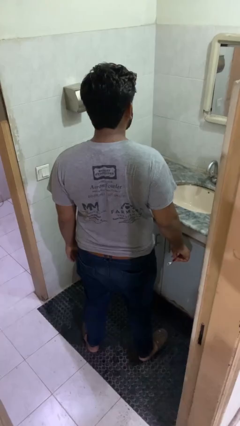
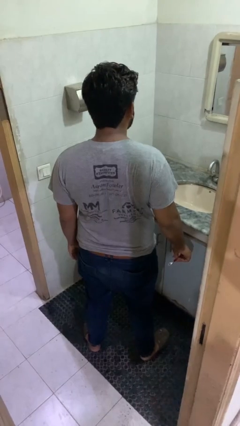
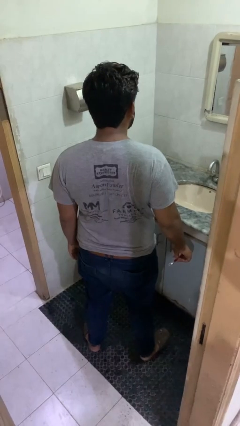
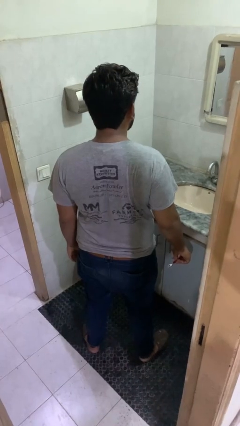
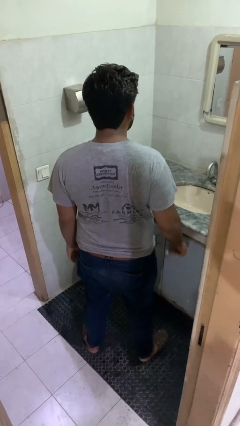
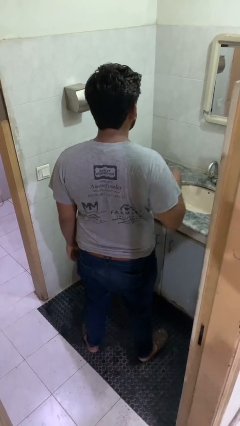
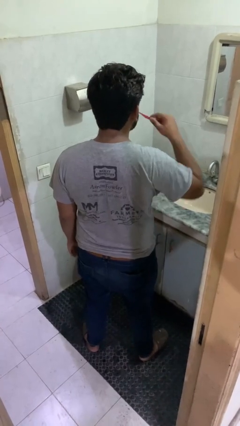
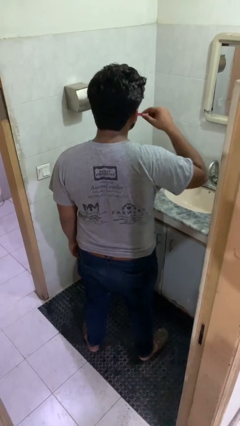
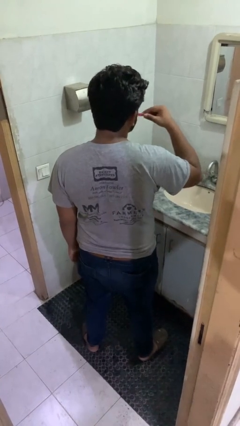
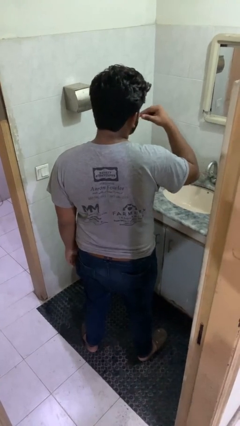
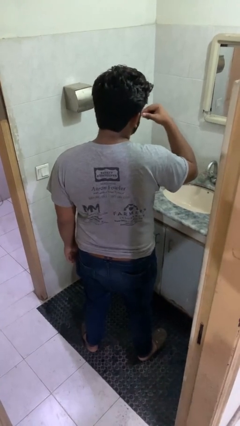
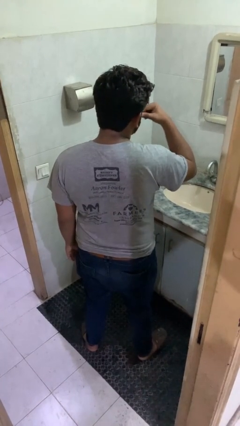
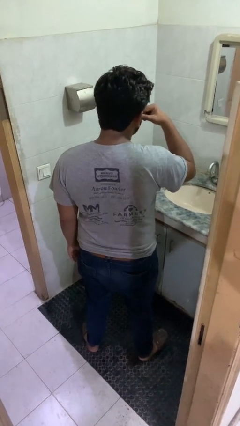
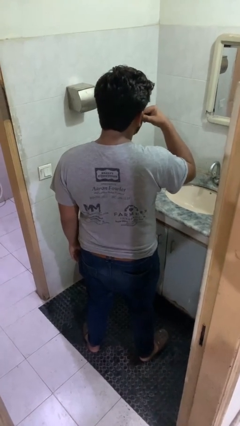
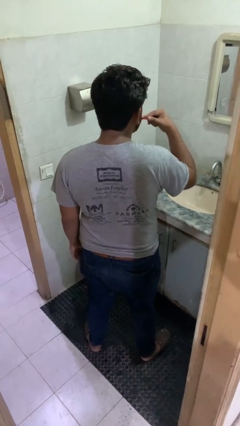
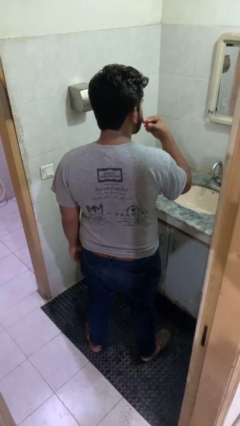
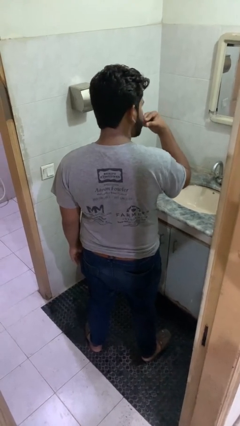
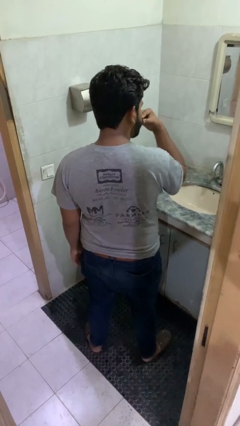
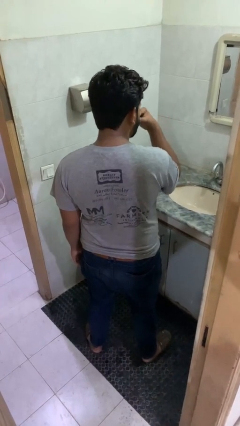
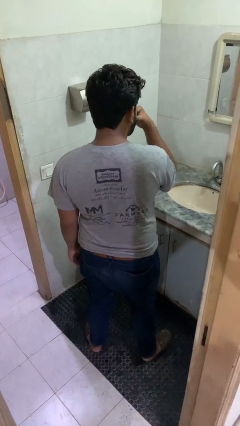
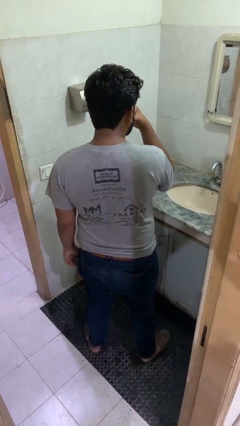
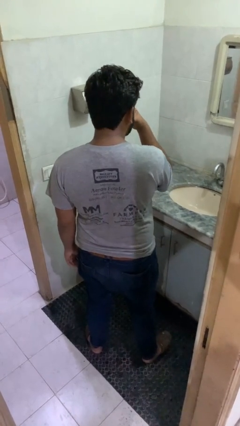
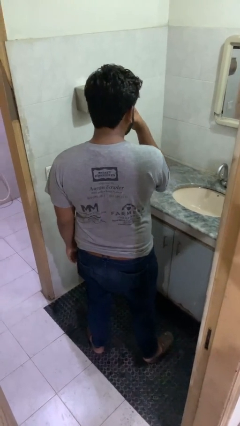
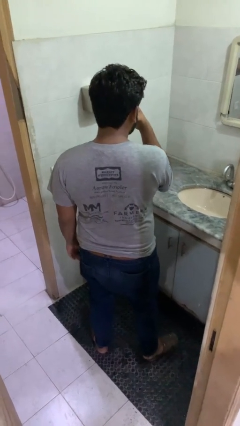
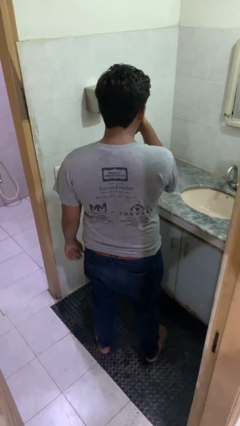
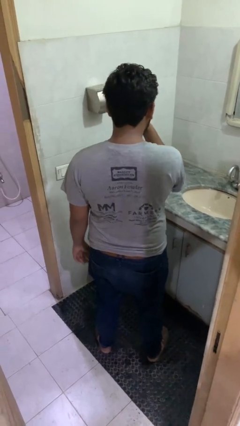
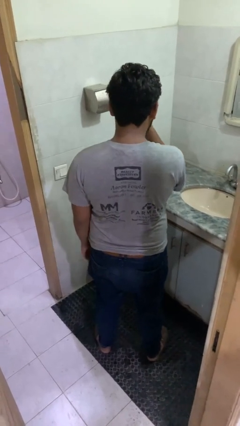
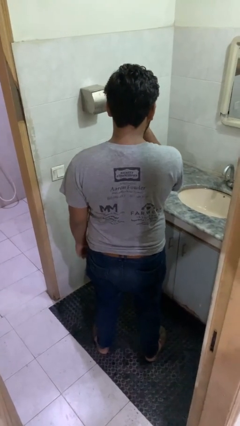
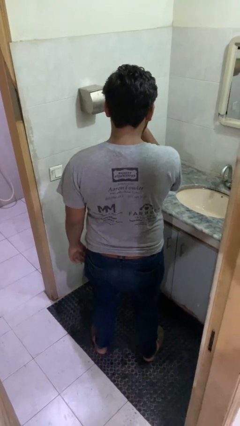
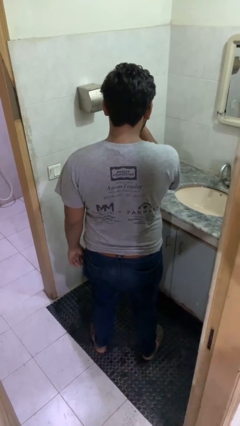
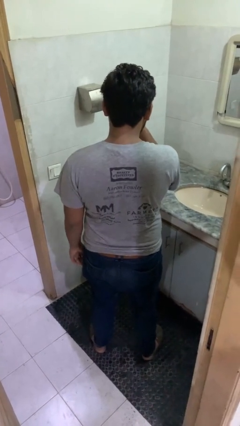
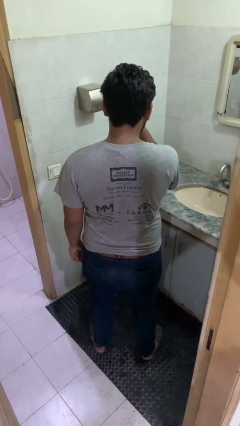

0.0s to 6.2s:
person brushes teeth

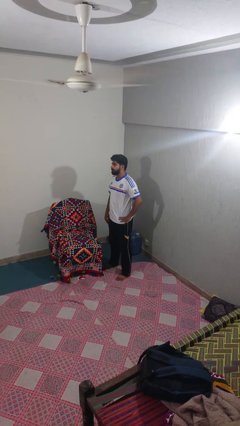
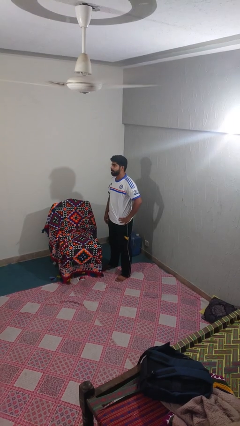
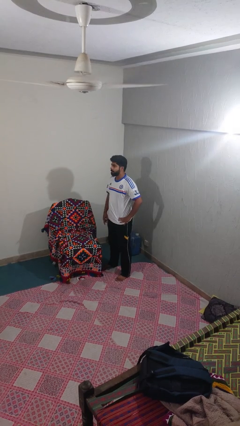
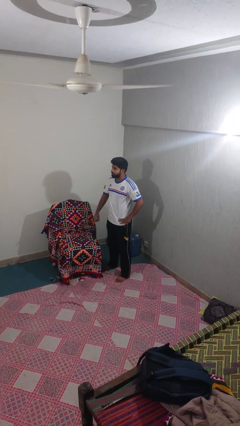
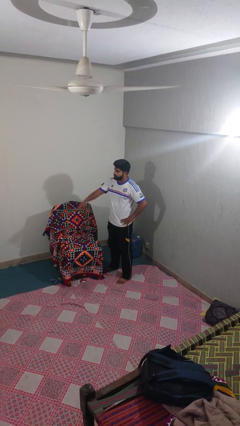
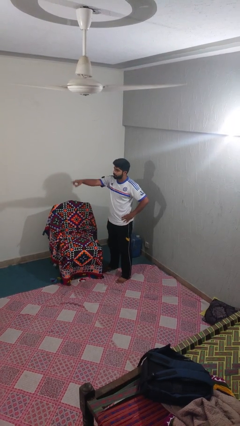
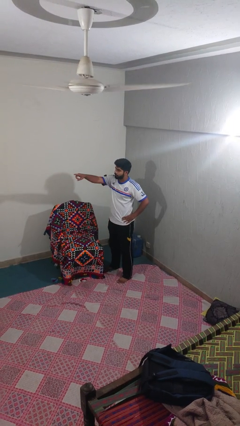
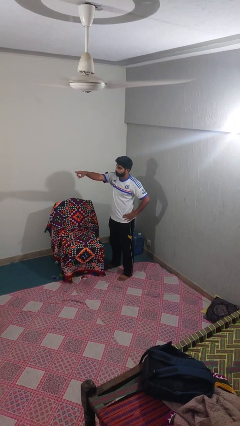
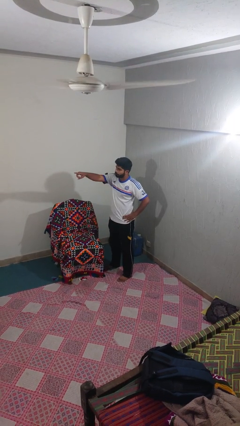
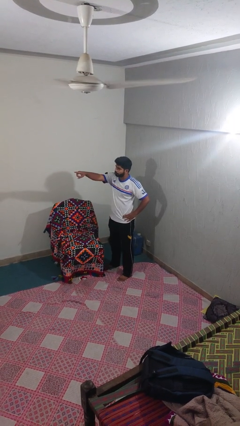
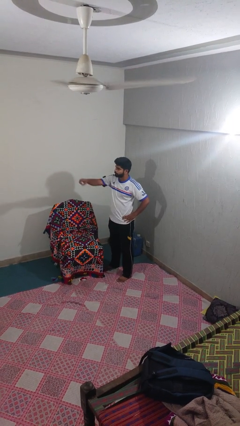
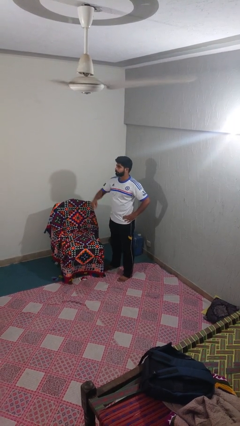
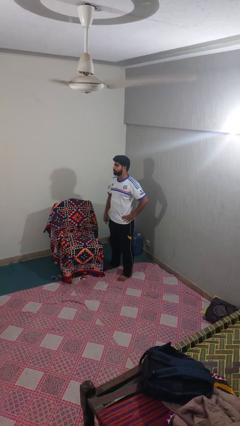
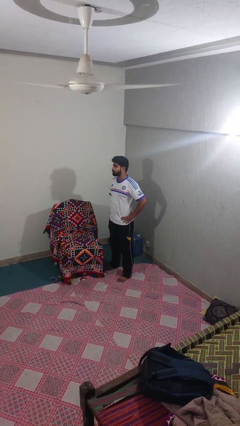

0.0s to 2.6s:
person points at person

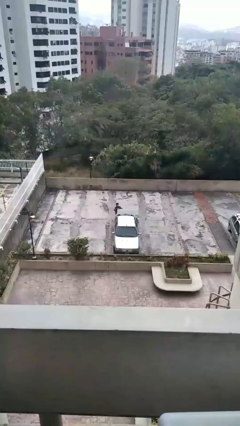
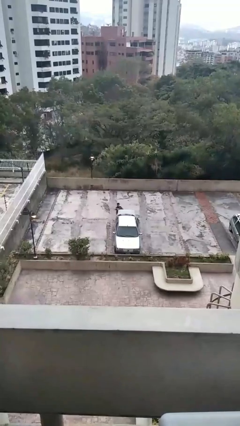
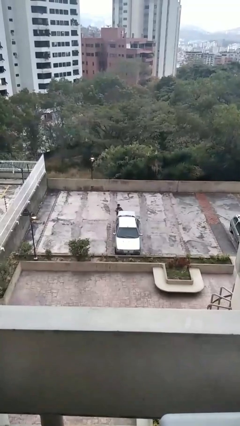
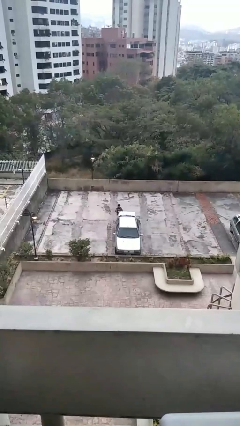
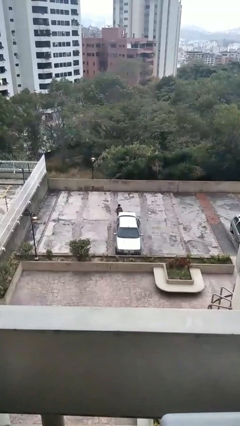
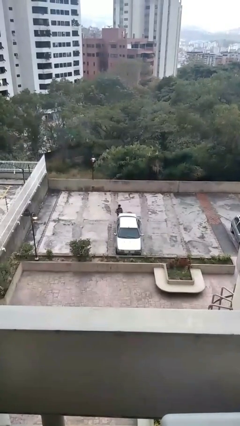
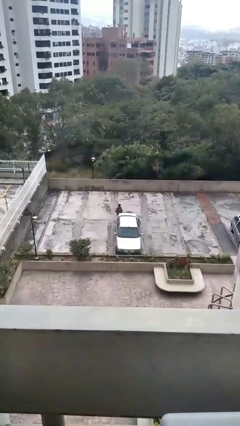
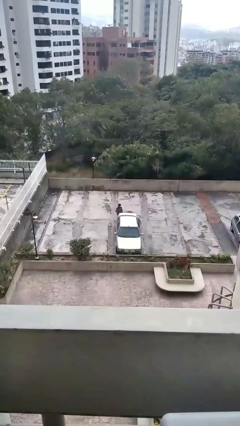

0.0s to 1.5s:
person closes car trunk

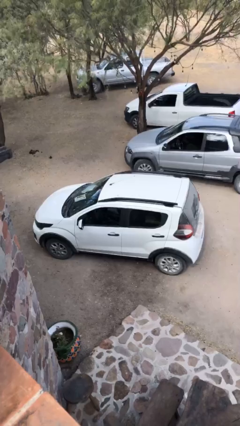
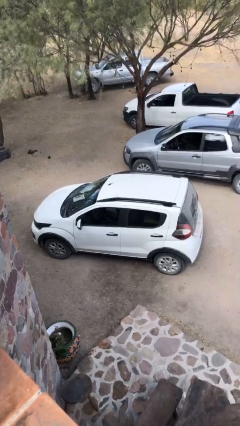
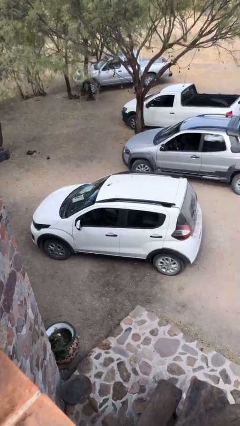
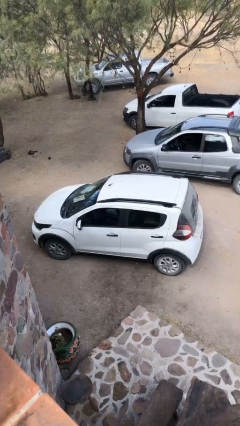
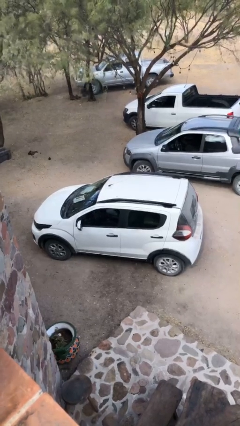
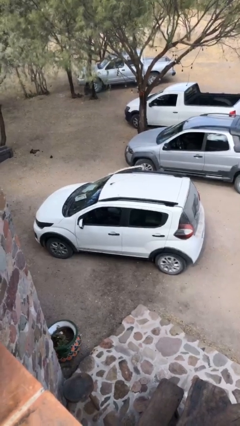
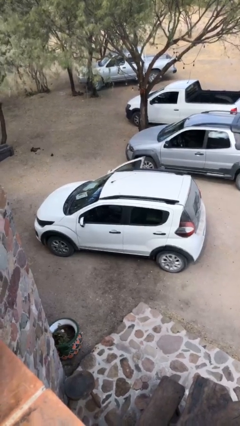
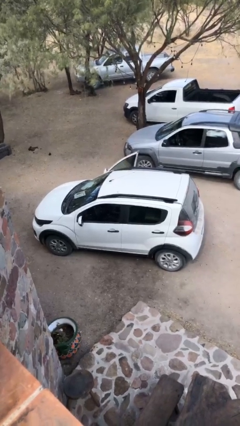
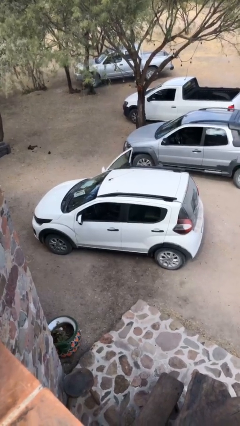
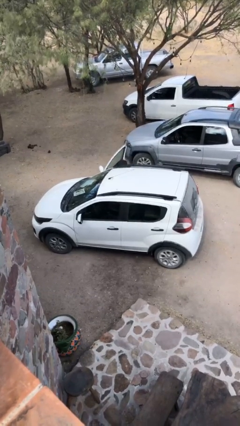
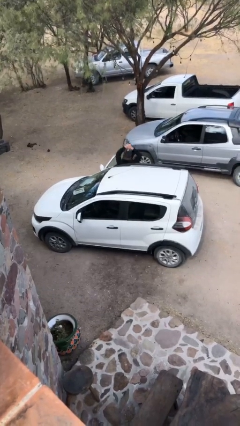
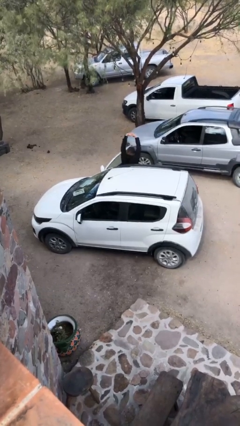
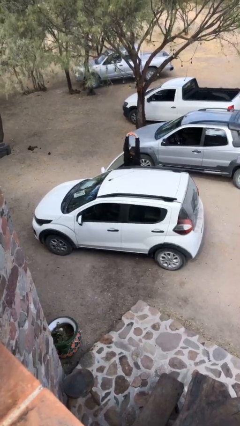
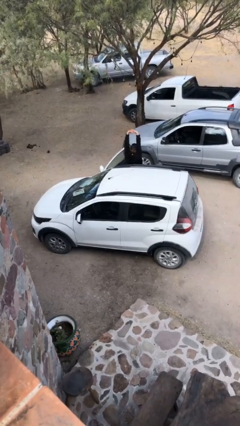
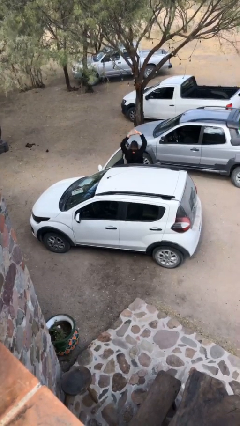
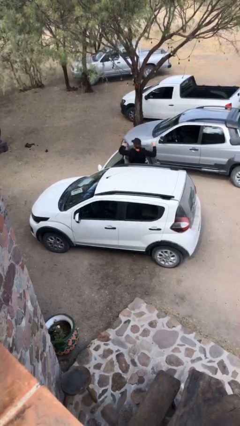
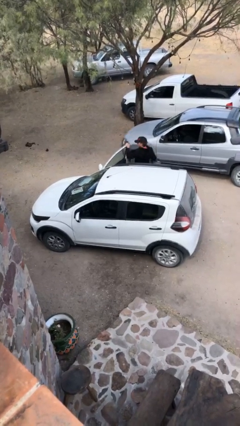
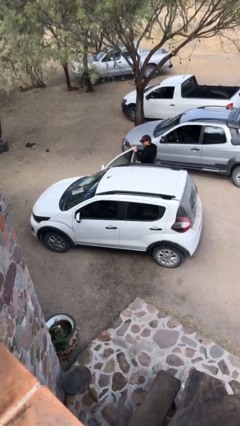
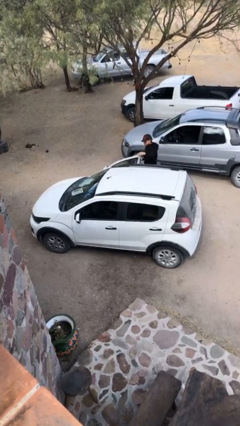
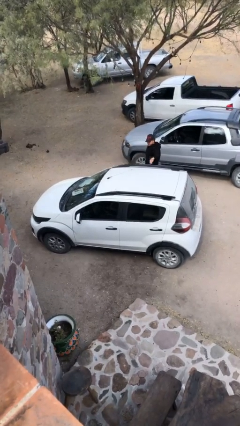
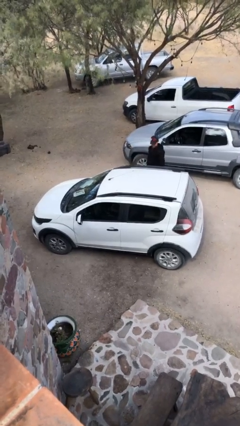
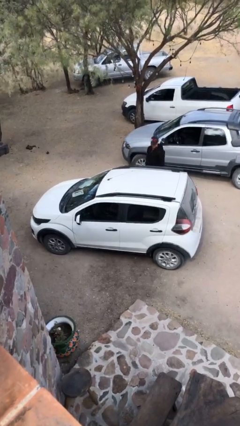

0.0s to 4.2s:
car drops off person

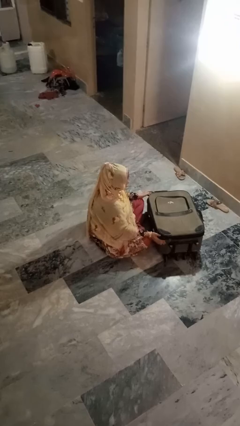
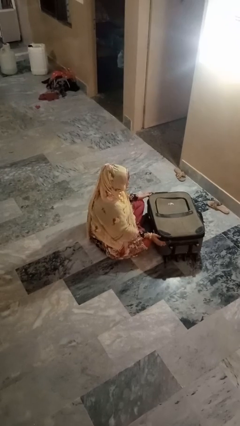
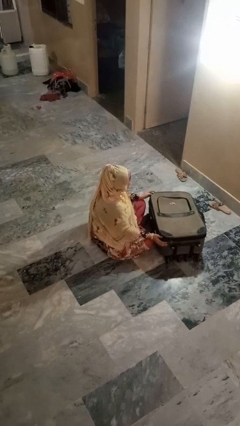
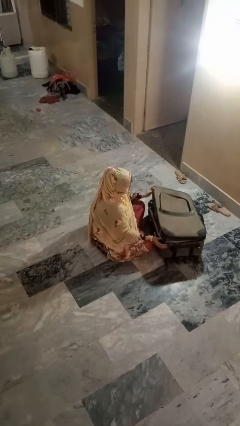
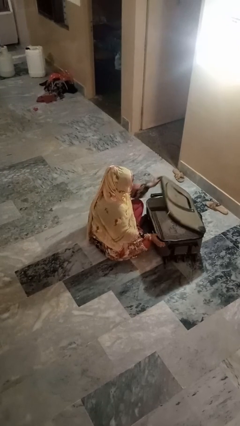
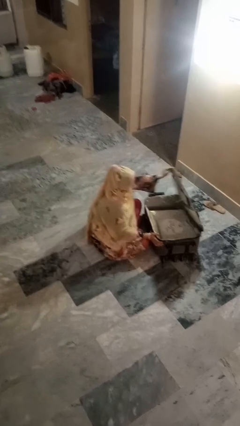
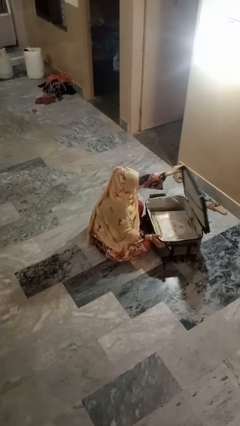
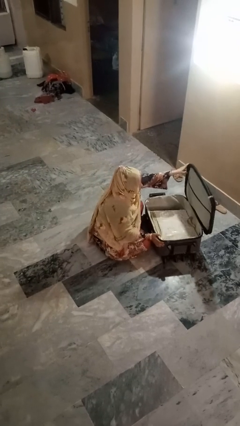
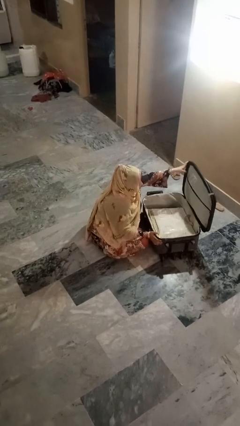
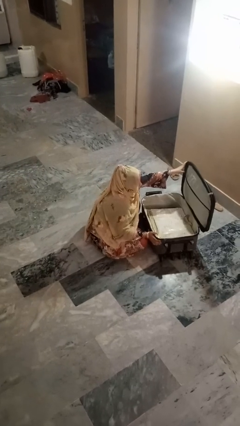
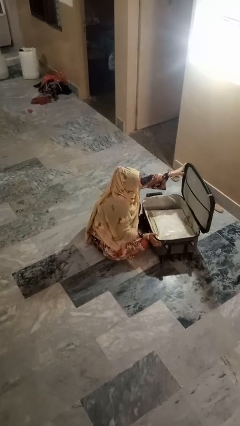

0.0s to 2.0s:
person opens suitcase

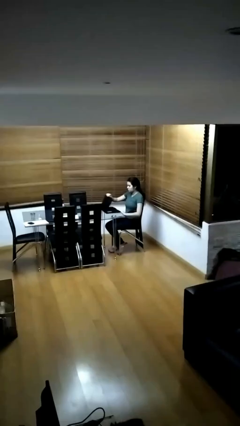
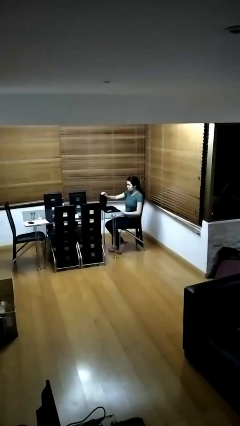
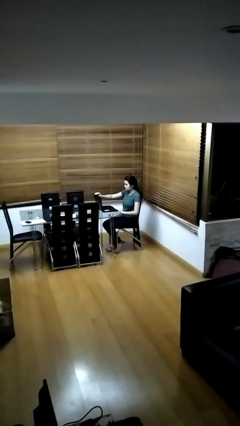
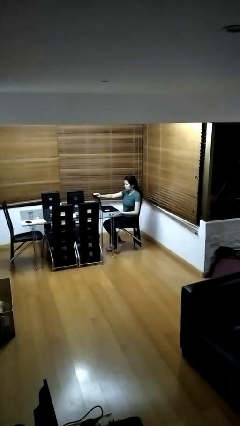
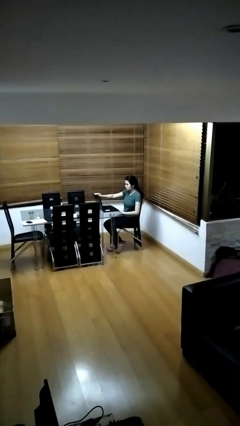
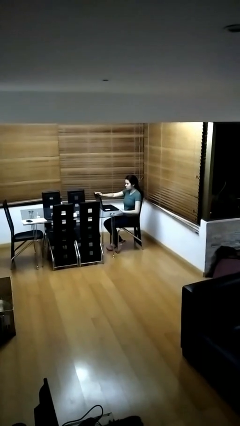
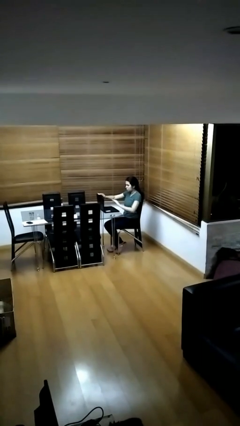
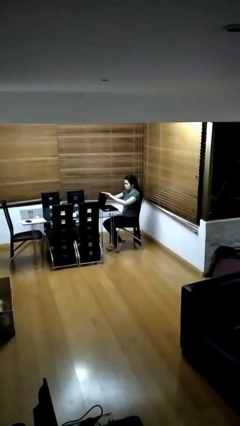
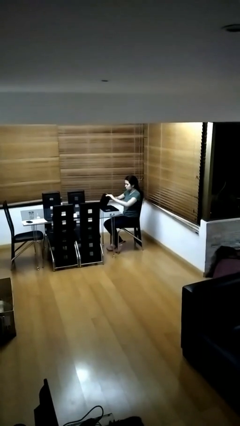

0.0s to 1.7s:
person interacts with laptop
